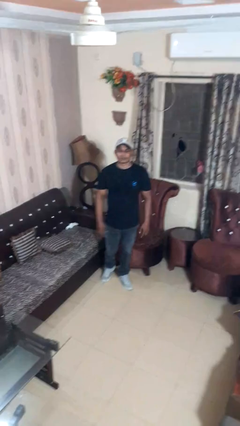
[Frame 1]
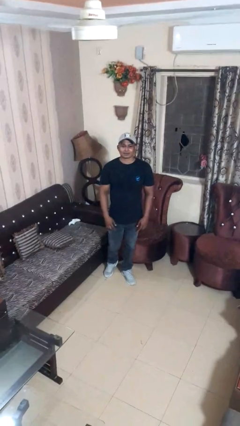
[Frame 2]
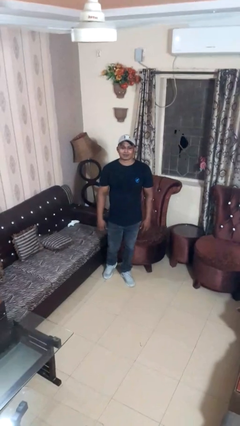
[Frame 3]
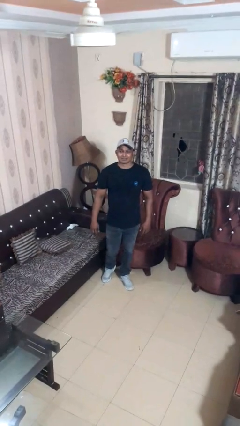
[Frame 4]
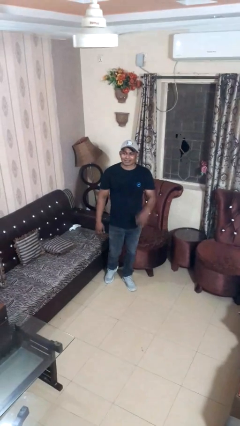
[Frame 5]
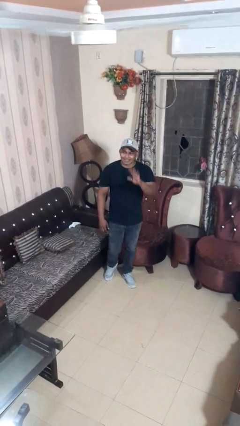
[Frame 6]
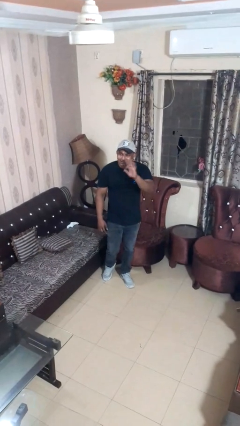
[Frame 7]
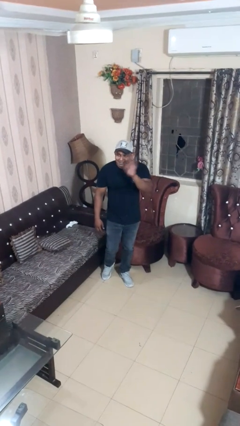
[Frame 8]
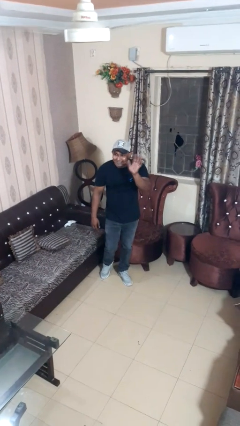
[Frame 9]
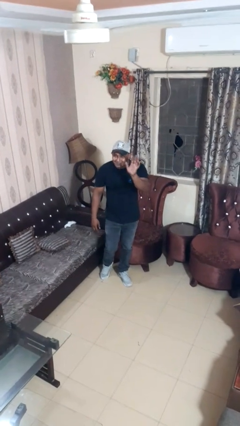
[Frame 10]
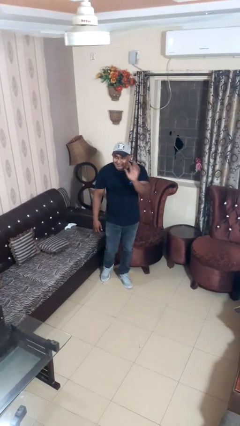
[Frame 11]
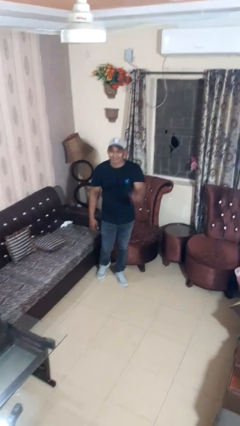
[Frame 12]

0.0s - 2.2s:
person waves at person

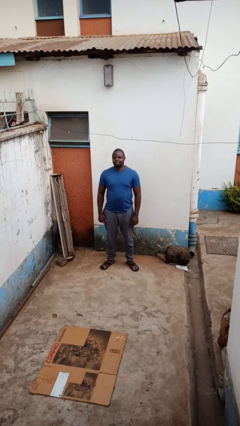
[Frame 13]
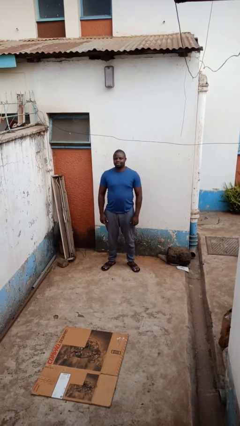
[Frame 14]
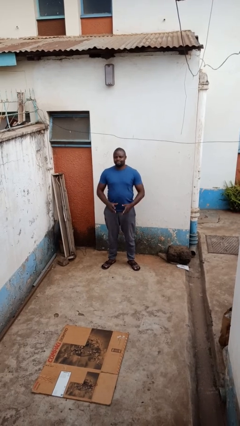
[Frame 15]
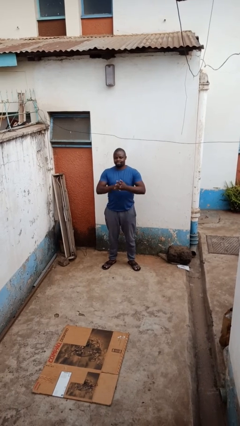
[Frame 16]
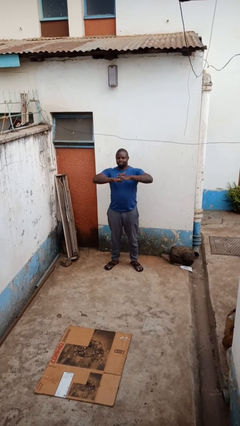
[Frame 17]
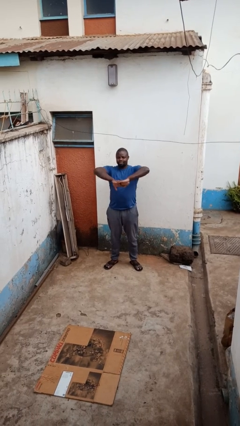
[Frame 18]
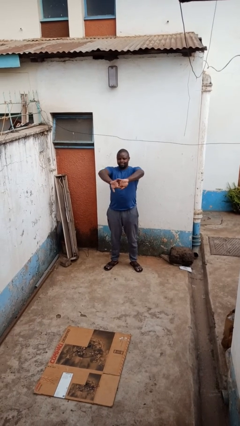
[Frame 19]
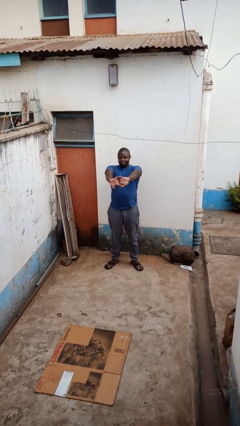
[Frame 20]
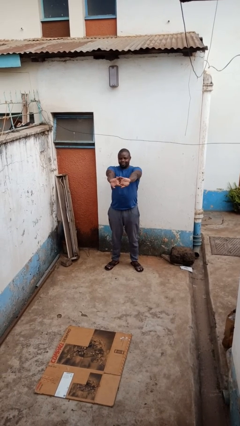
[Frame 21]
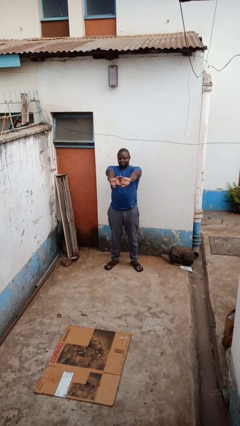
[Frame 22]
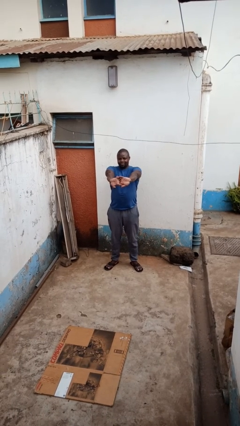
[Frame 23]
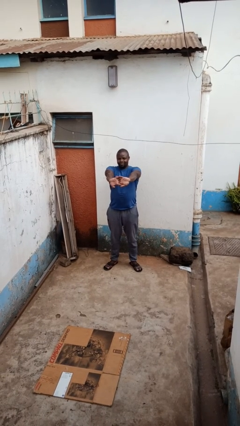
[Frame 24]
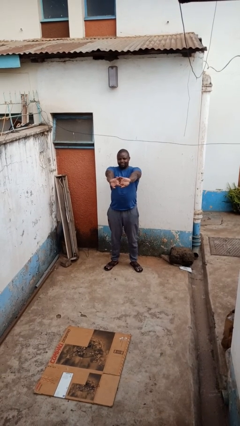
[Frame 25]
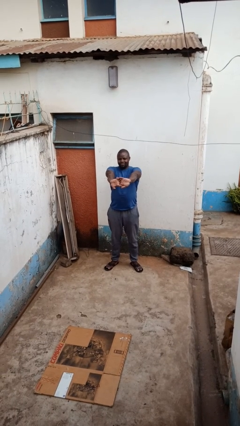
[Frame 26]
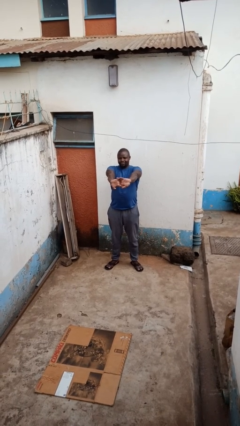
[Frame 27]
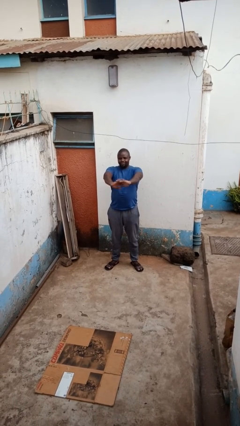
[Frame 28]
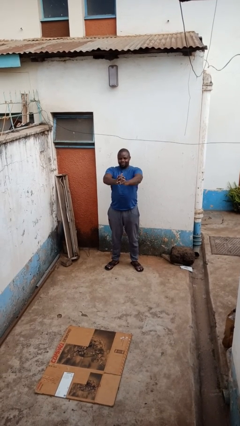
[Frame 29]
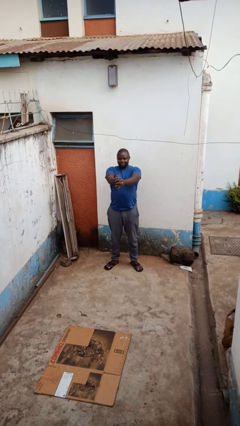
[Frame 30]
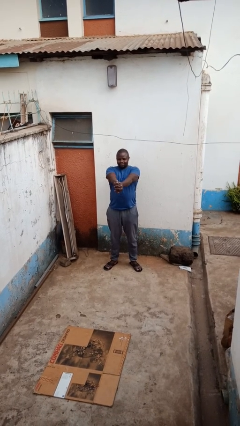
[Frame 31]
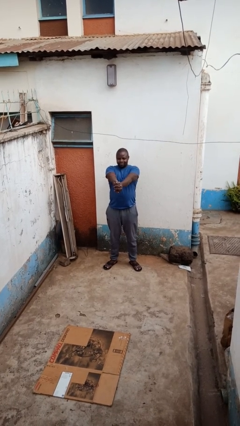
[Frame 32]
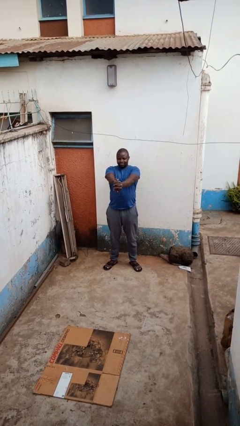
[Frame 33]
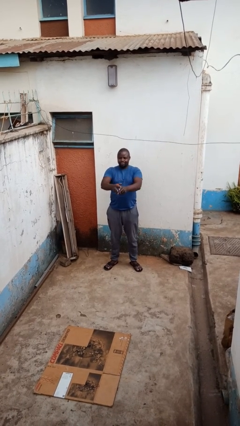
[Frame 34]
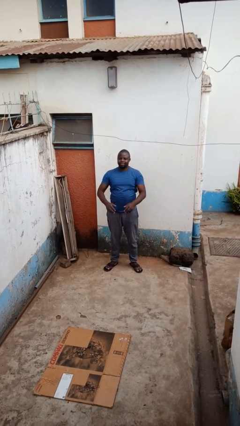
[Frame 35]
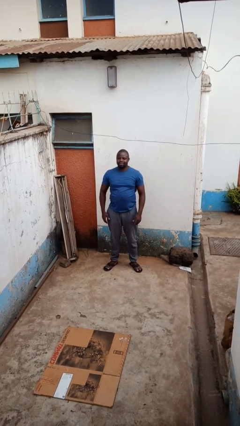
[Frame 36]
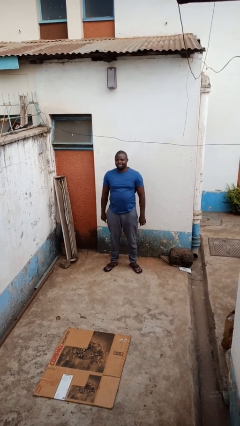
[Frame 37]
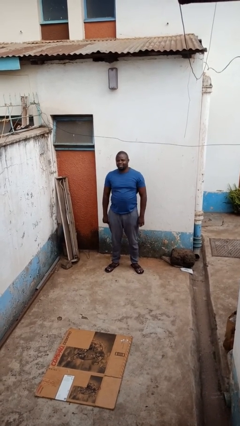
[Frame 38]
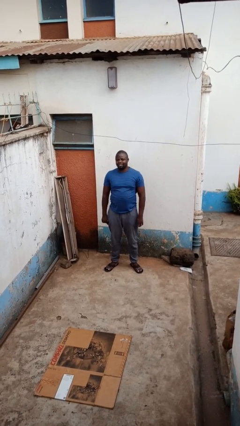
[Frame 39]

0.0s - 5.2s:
person cracks knuckles

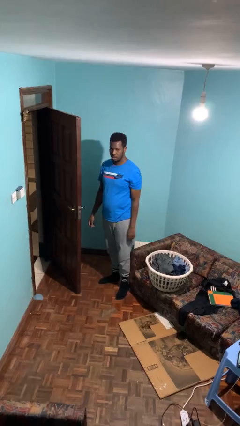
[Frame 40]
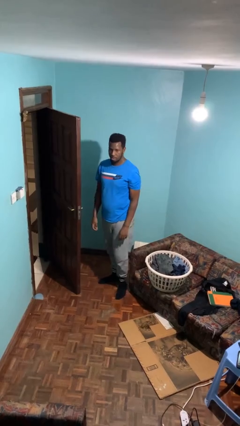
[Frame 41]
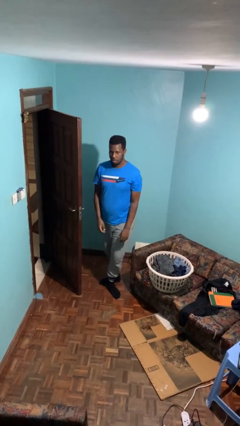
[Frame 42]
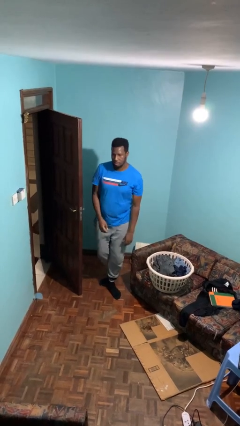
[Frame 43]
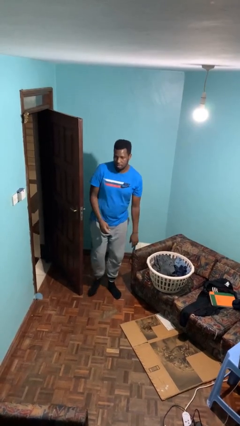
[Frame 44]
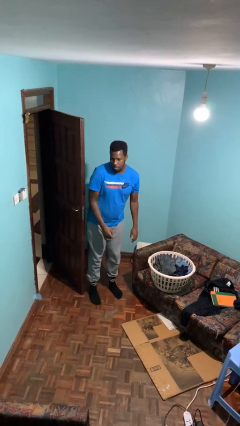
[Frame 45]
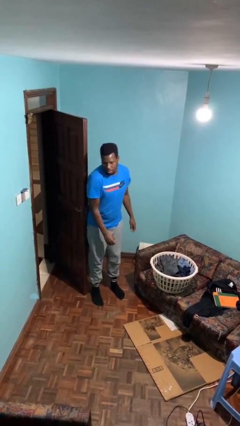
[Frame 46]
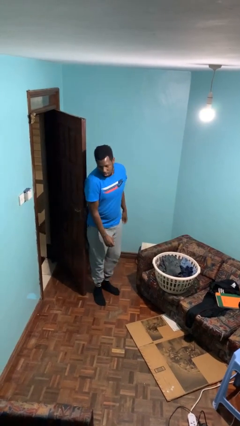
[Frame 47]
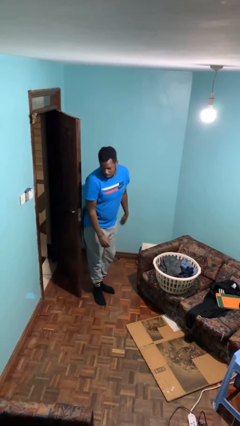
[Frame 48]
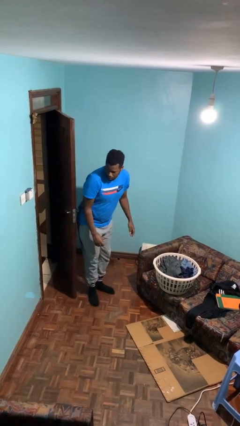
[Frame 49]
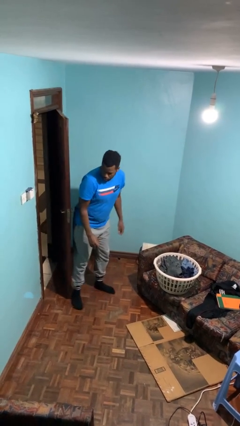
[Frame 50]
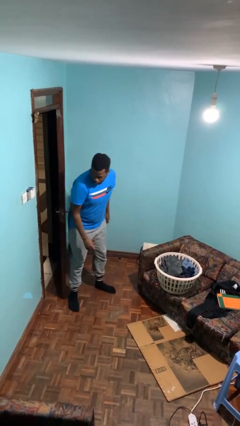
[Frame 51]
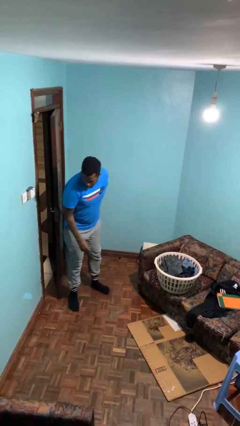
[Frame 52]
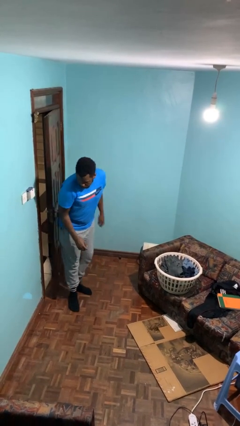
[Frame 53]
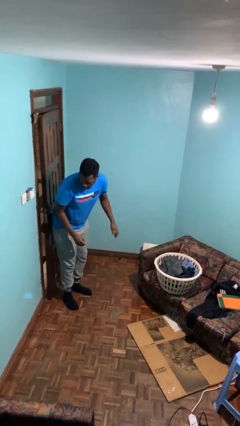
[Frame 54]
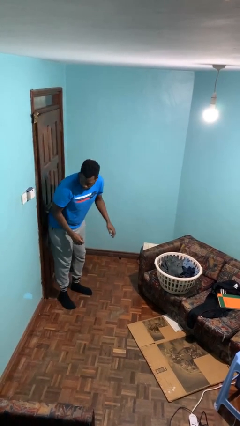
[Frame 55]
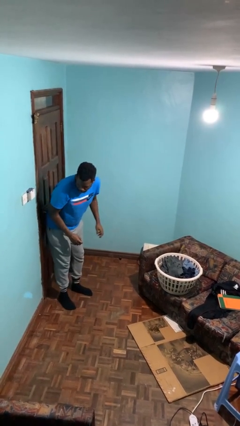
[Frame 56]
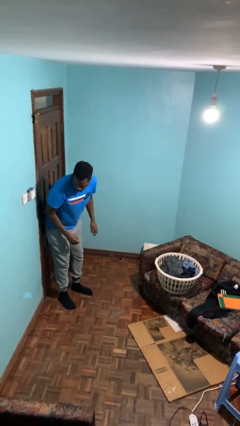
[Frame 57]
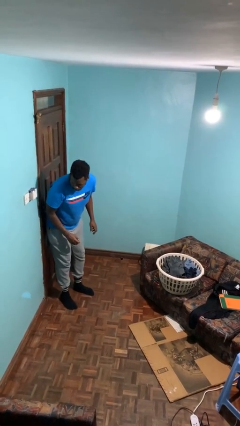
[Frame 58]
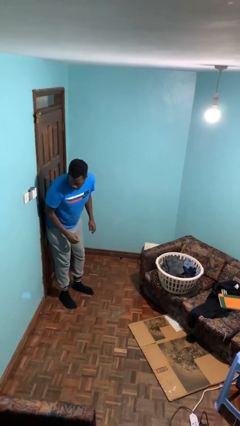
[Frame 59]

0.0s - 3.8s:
person closes door with hip

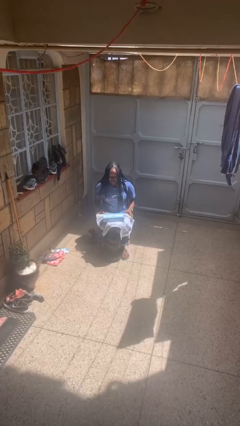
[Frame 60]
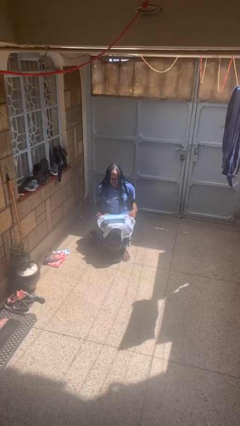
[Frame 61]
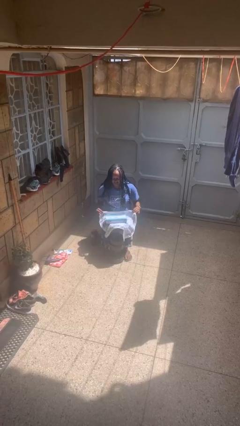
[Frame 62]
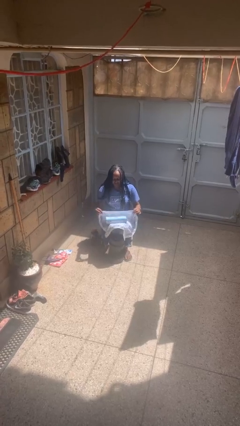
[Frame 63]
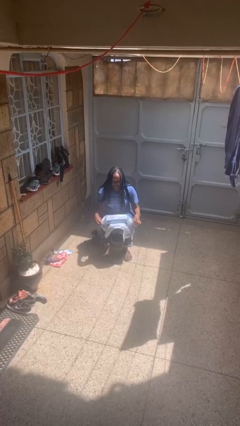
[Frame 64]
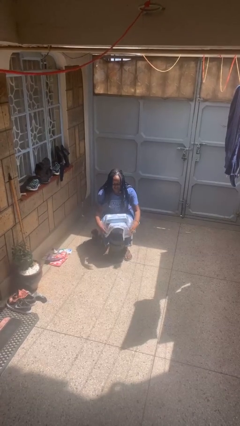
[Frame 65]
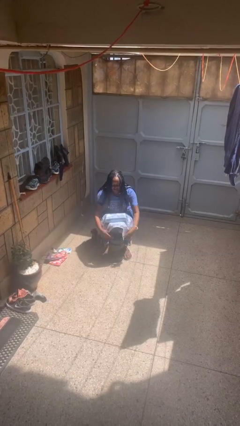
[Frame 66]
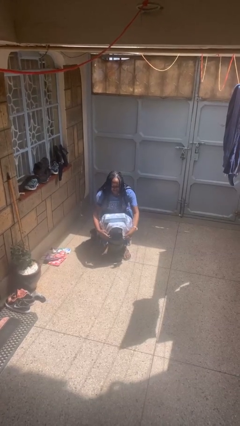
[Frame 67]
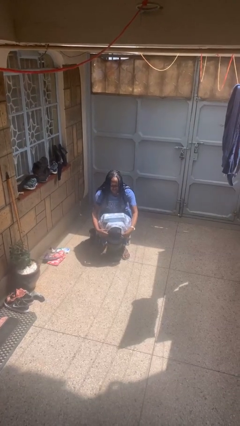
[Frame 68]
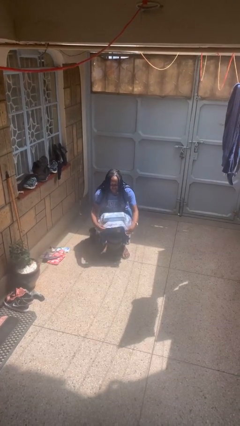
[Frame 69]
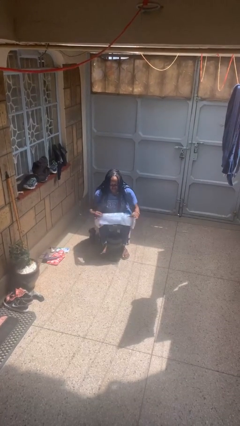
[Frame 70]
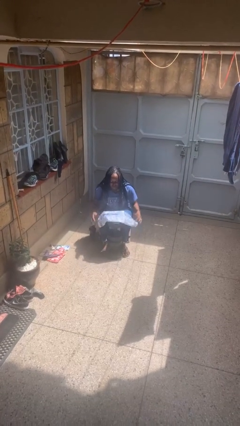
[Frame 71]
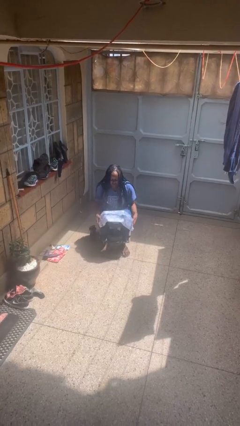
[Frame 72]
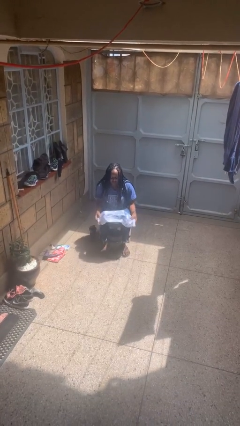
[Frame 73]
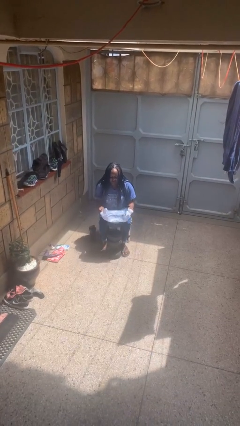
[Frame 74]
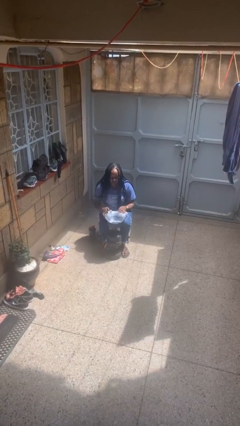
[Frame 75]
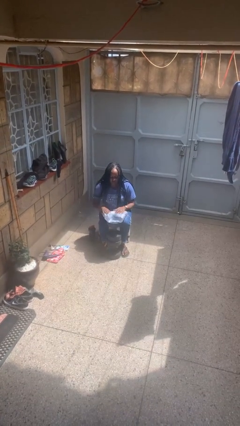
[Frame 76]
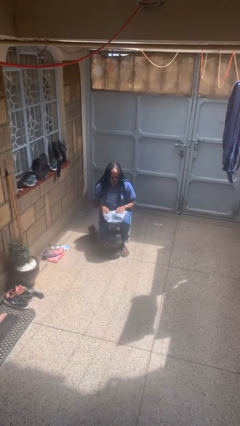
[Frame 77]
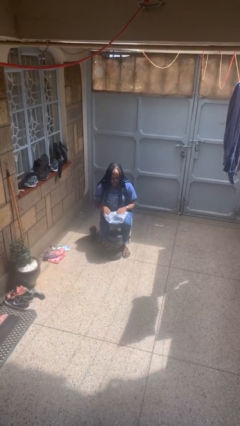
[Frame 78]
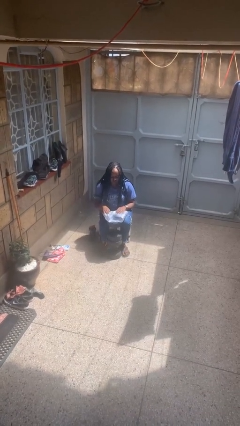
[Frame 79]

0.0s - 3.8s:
person wraps box

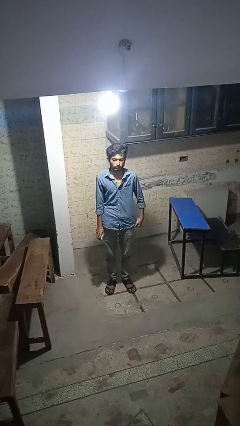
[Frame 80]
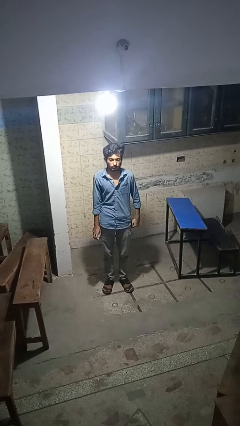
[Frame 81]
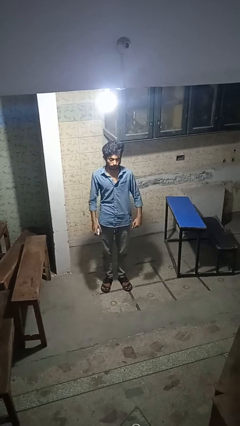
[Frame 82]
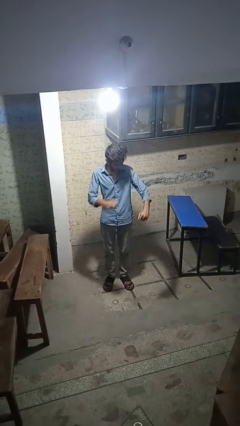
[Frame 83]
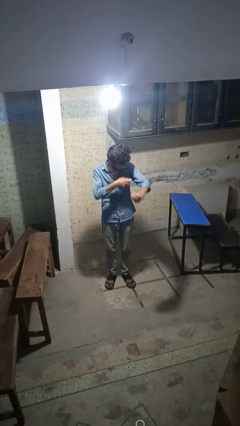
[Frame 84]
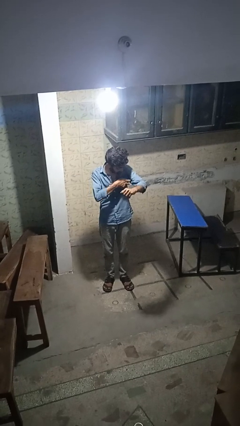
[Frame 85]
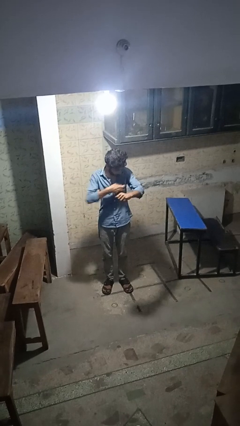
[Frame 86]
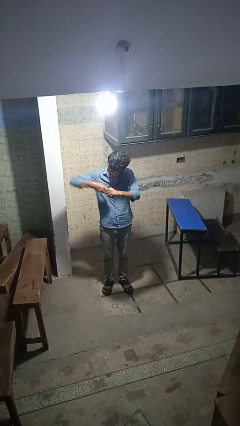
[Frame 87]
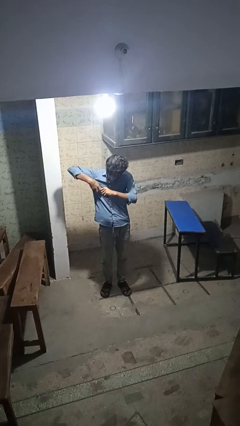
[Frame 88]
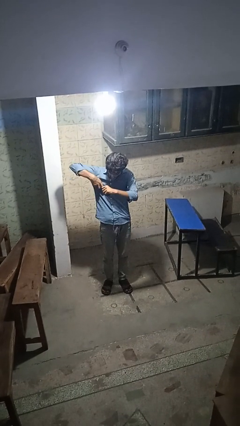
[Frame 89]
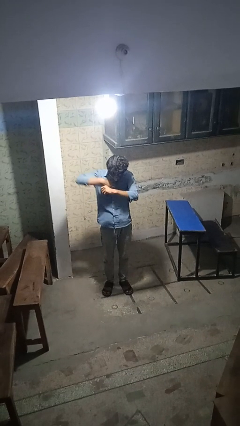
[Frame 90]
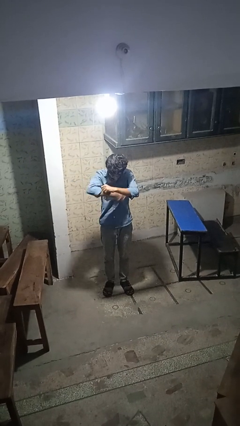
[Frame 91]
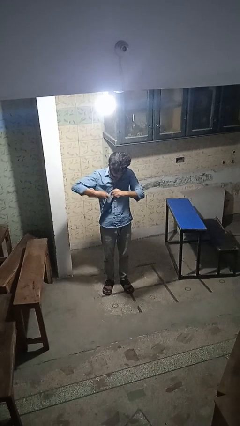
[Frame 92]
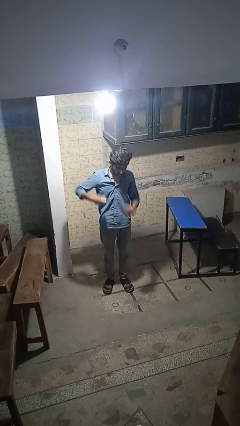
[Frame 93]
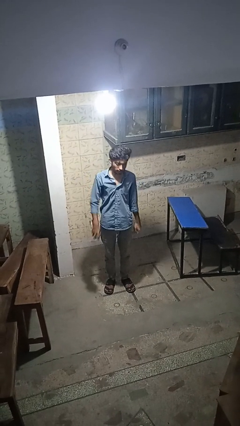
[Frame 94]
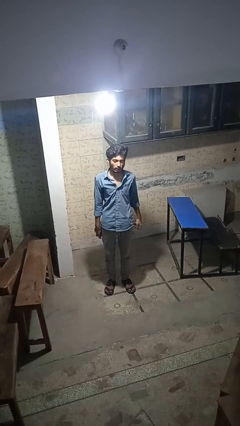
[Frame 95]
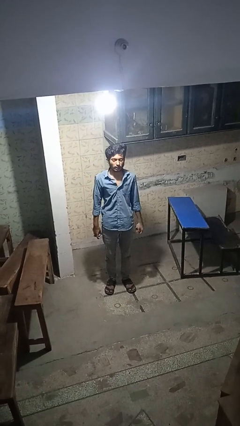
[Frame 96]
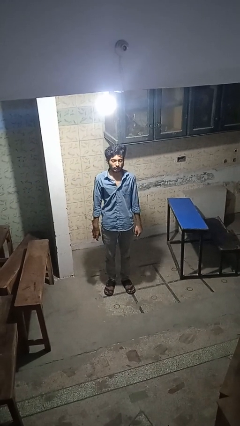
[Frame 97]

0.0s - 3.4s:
person applies deodorant
